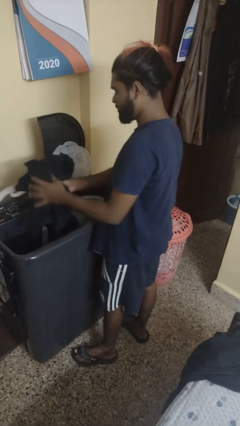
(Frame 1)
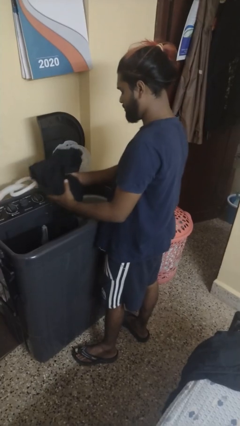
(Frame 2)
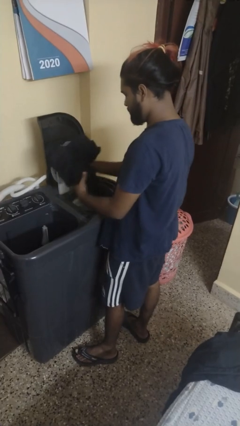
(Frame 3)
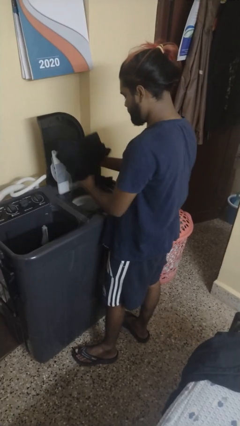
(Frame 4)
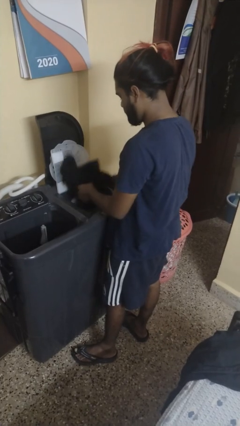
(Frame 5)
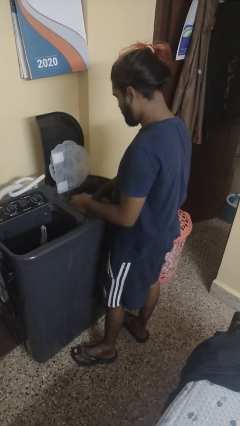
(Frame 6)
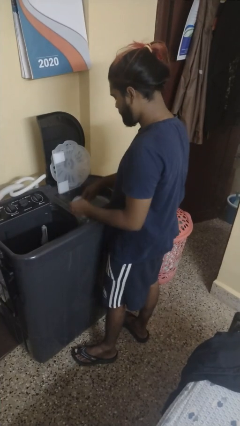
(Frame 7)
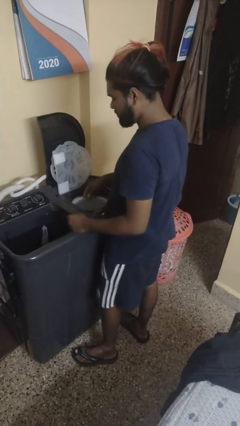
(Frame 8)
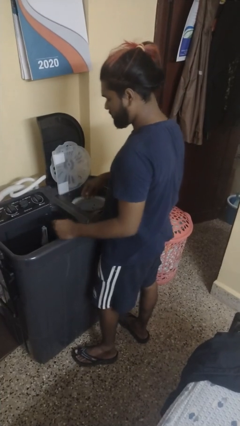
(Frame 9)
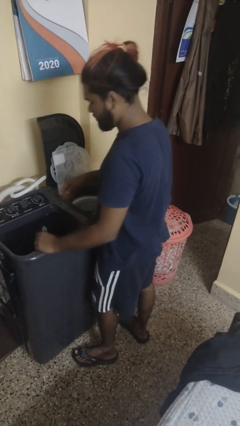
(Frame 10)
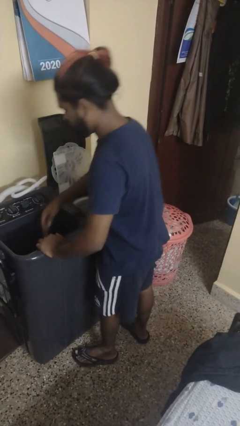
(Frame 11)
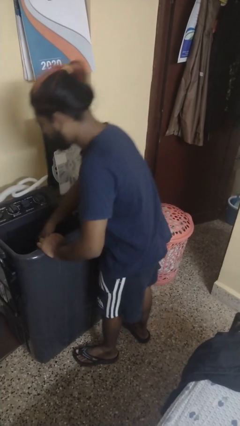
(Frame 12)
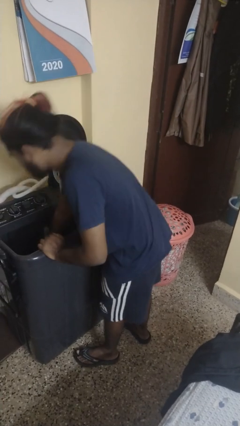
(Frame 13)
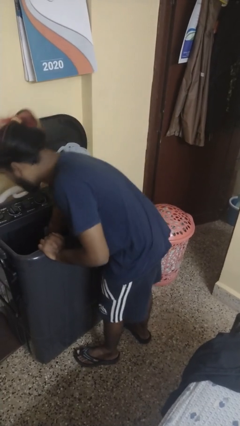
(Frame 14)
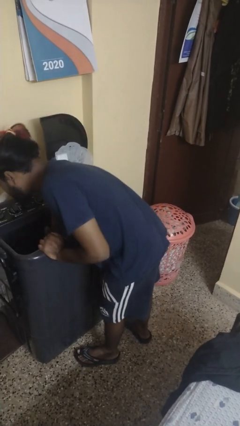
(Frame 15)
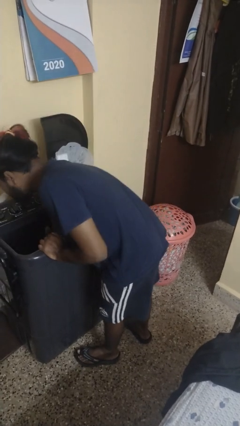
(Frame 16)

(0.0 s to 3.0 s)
person loads dryer

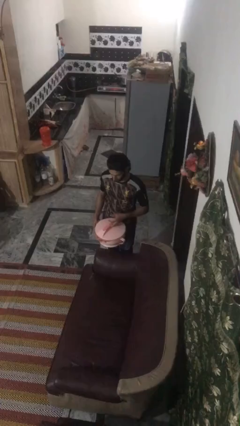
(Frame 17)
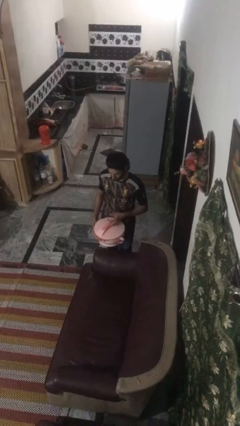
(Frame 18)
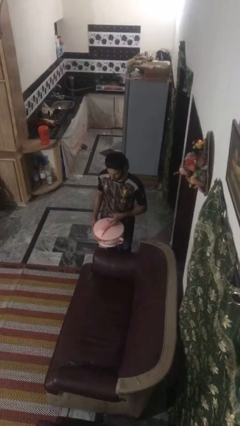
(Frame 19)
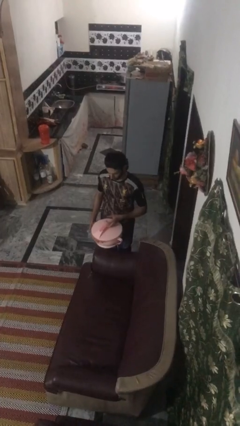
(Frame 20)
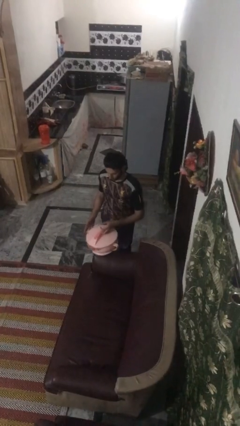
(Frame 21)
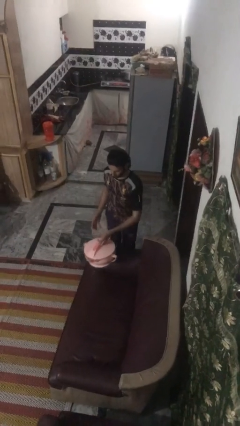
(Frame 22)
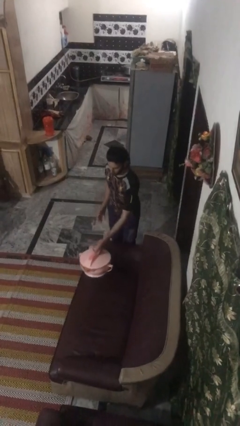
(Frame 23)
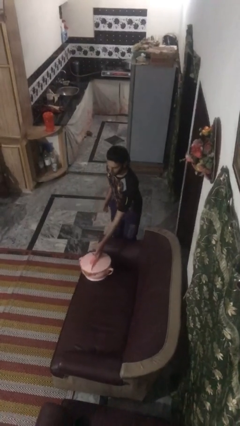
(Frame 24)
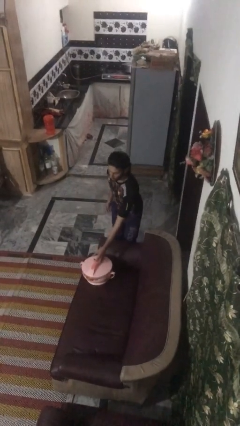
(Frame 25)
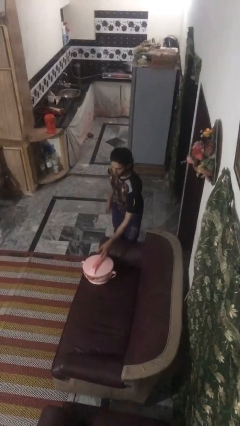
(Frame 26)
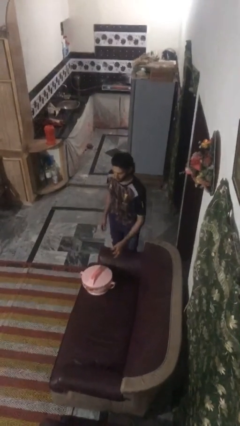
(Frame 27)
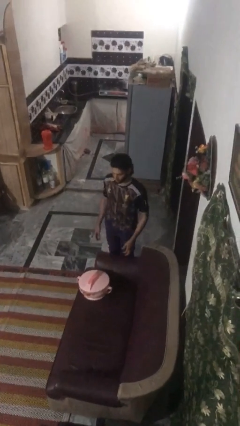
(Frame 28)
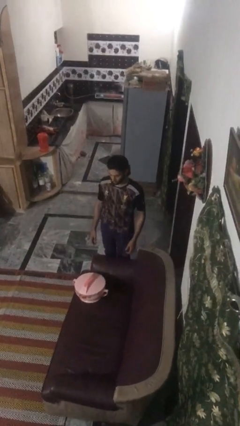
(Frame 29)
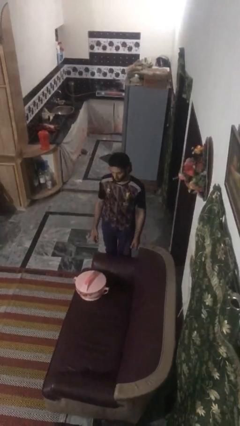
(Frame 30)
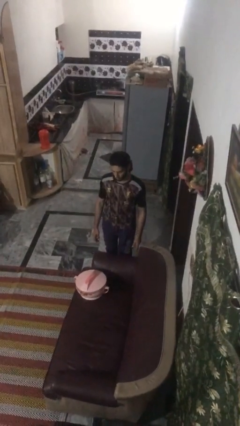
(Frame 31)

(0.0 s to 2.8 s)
person puts down object on couch

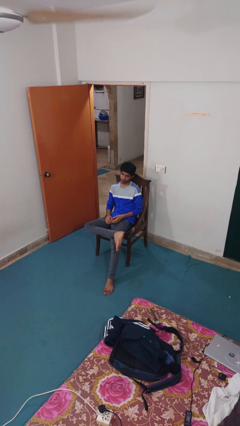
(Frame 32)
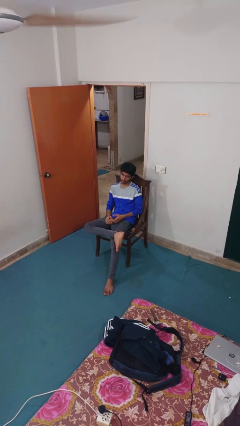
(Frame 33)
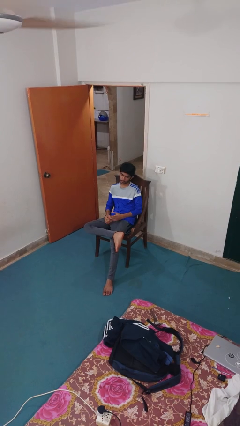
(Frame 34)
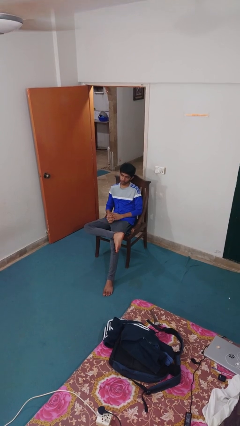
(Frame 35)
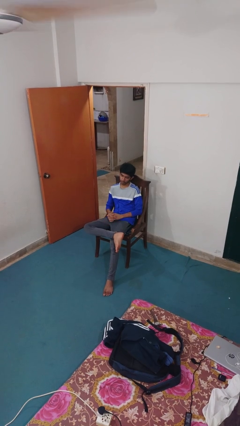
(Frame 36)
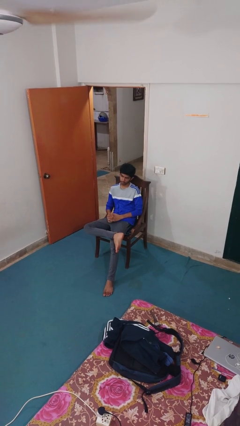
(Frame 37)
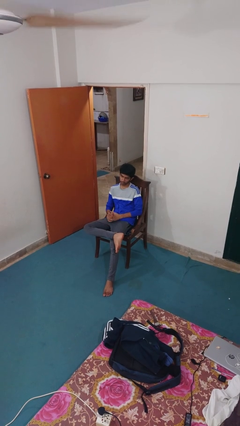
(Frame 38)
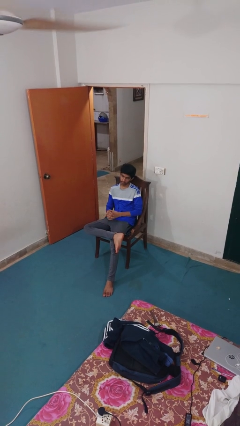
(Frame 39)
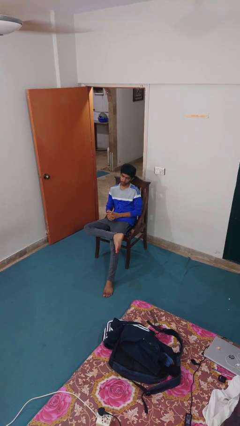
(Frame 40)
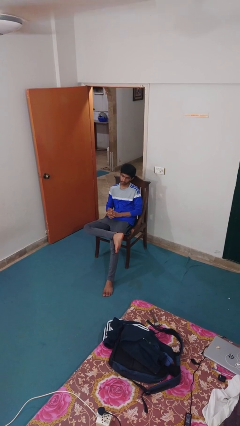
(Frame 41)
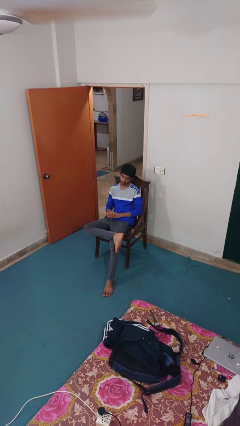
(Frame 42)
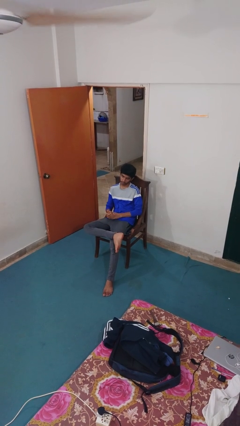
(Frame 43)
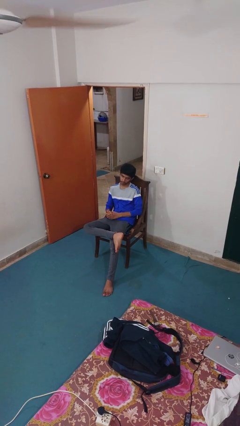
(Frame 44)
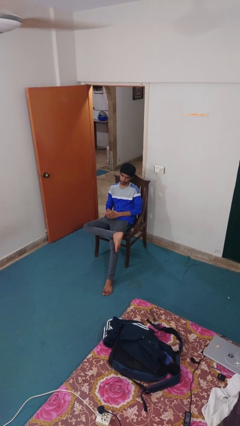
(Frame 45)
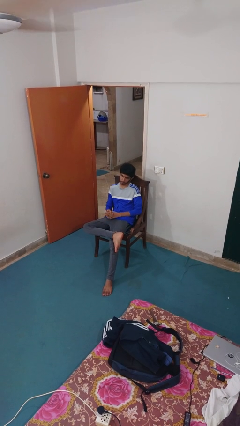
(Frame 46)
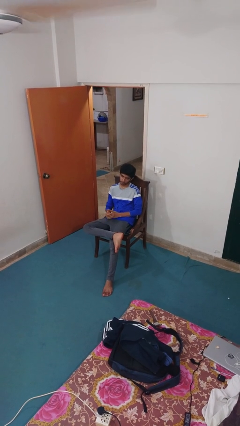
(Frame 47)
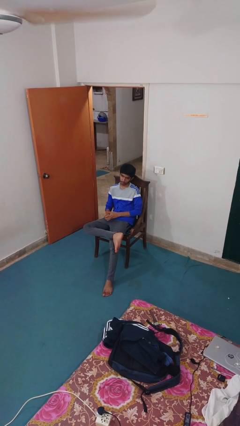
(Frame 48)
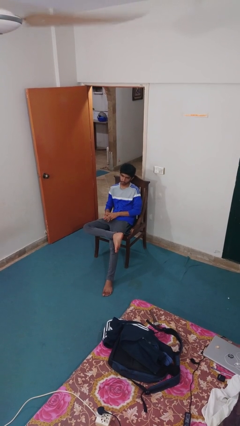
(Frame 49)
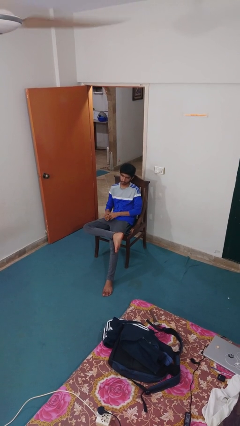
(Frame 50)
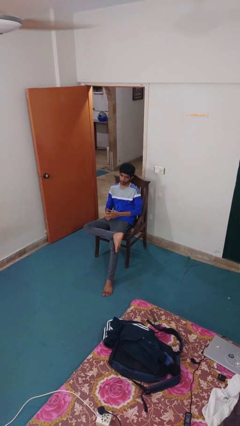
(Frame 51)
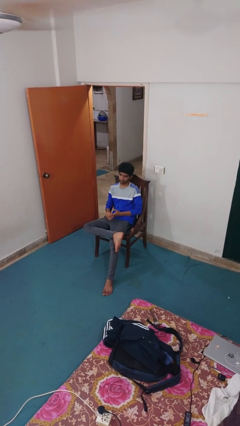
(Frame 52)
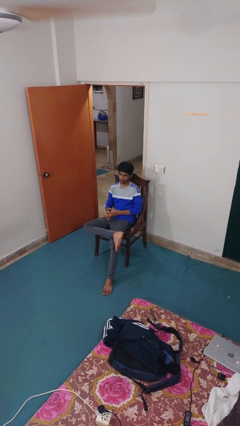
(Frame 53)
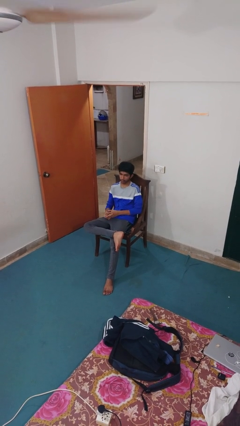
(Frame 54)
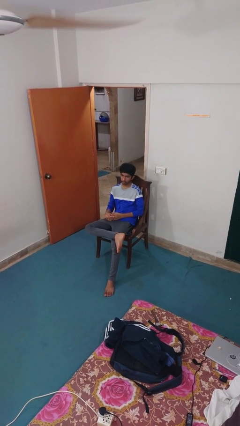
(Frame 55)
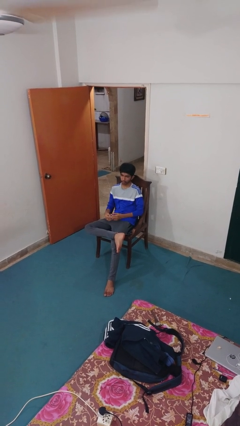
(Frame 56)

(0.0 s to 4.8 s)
person snaps fingers

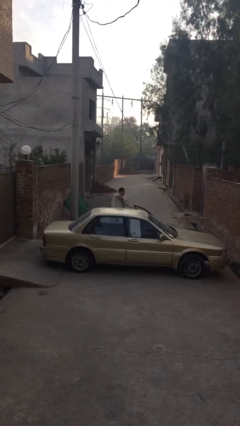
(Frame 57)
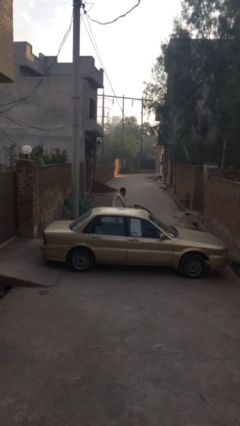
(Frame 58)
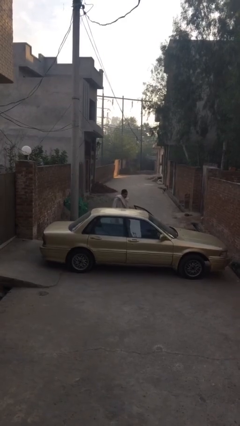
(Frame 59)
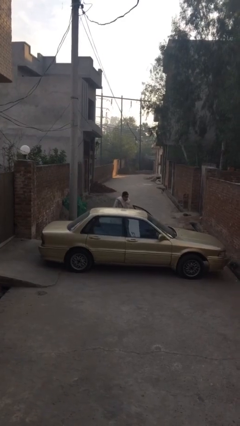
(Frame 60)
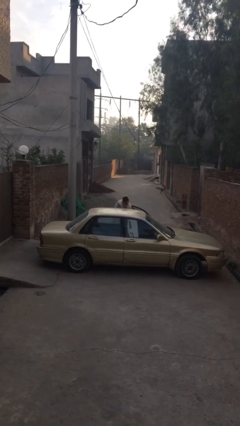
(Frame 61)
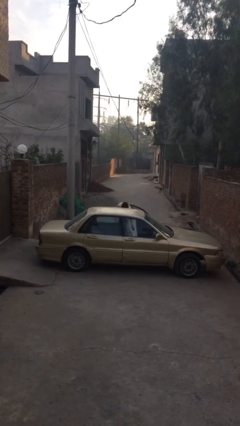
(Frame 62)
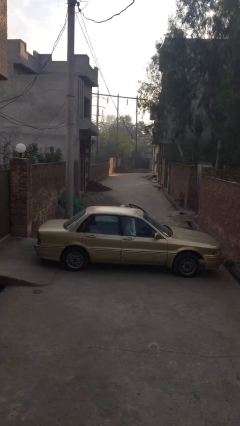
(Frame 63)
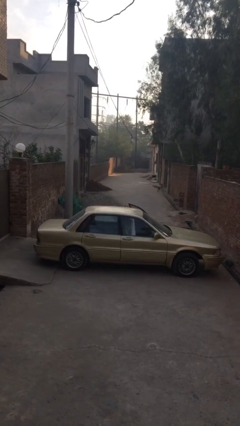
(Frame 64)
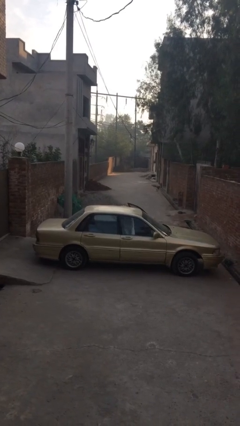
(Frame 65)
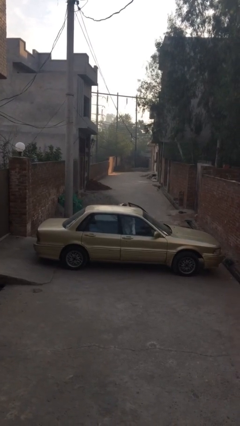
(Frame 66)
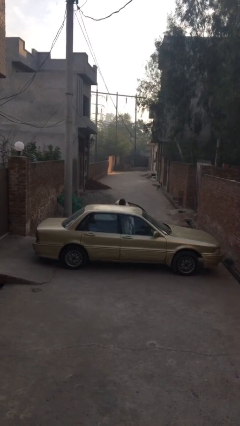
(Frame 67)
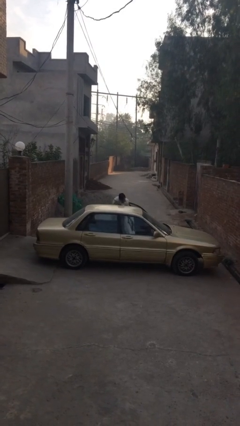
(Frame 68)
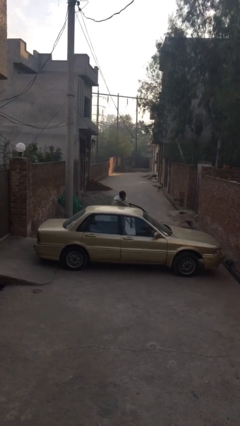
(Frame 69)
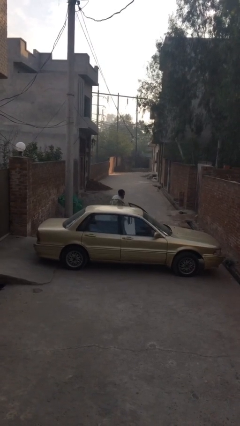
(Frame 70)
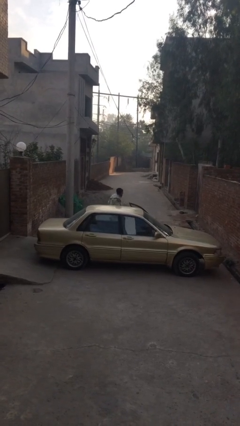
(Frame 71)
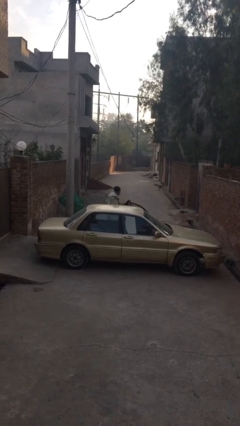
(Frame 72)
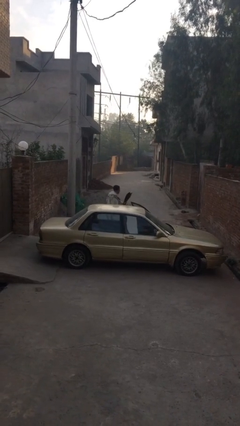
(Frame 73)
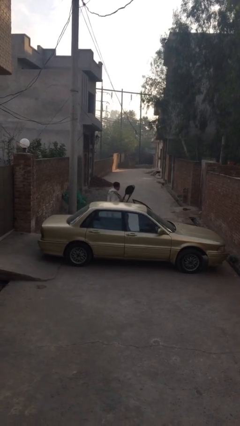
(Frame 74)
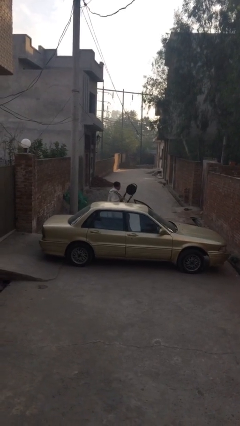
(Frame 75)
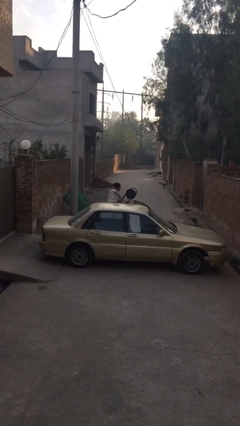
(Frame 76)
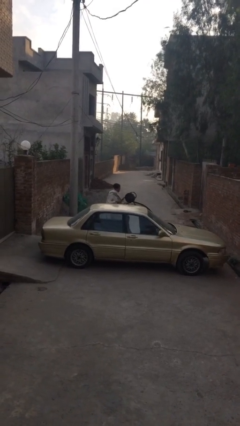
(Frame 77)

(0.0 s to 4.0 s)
person unloads car

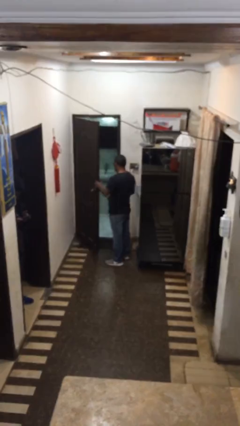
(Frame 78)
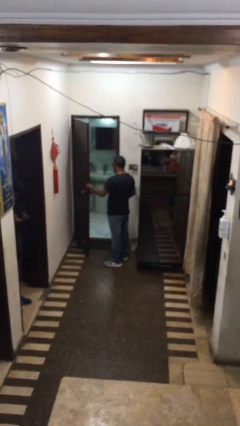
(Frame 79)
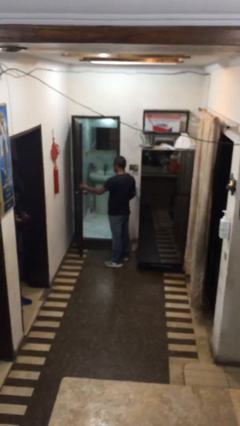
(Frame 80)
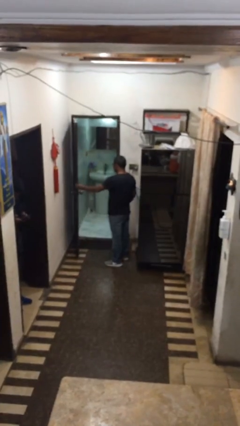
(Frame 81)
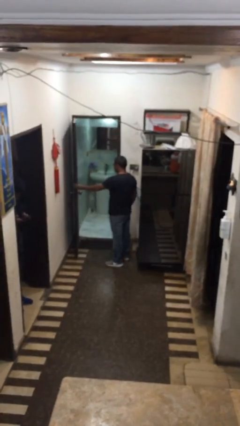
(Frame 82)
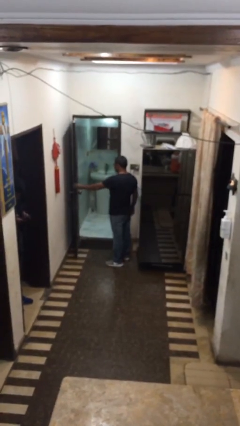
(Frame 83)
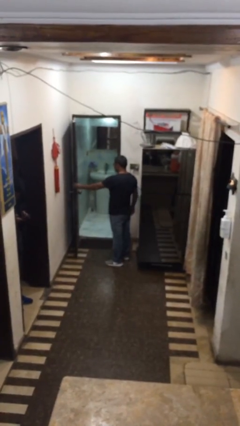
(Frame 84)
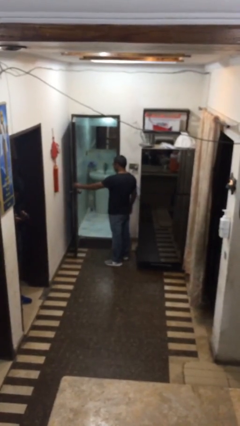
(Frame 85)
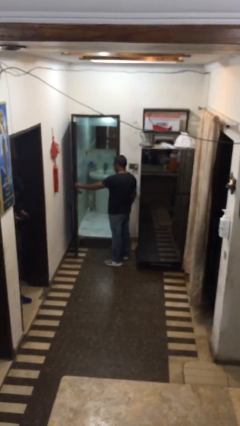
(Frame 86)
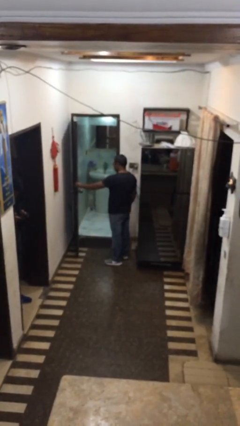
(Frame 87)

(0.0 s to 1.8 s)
person opens facility door

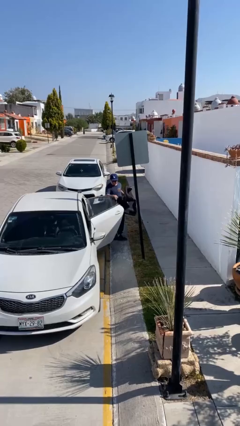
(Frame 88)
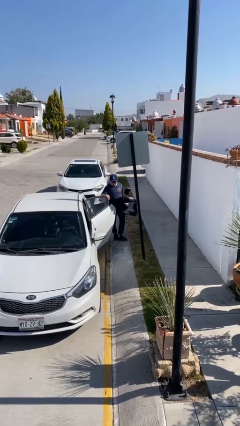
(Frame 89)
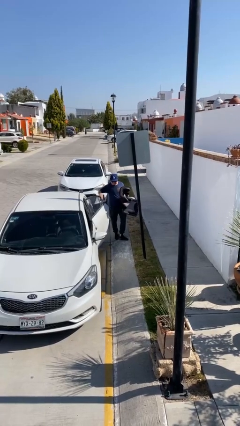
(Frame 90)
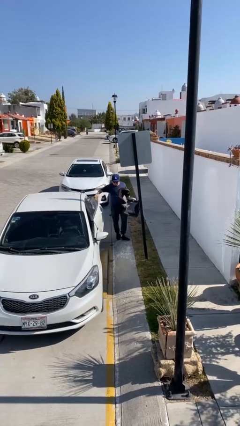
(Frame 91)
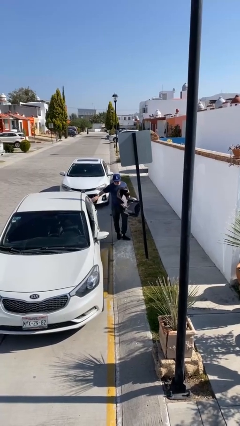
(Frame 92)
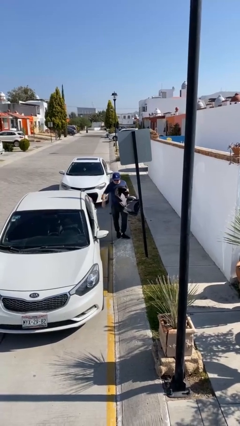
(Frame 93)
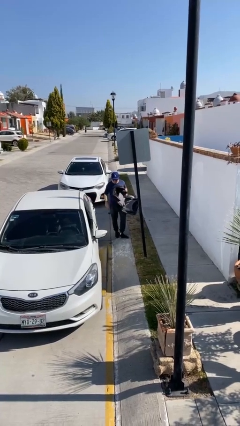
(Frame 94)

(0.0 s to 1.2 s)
person closes car door
